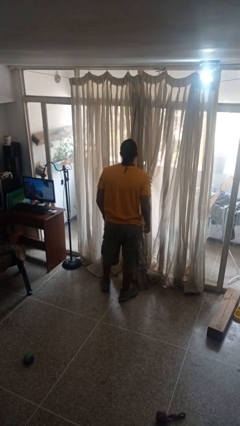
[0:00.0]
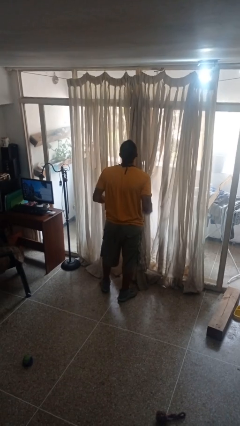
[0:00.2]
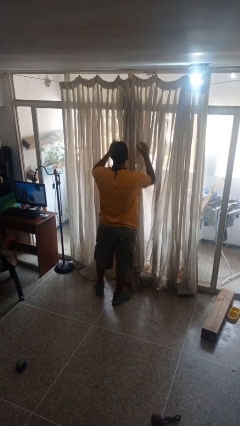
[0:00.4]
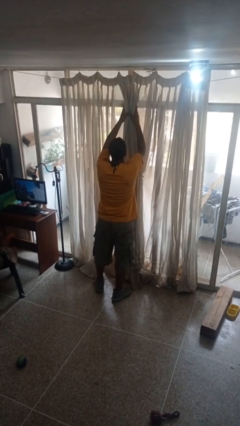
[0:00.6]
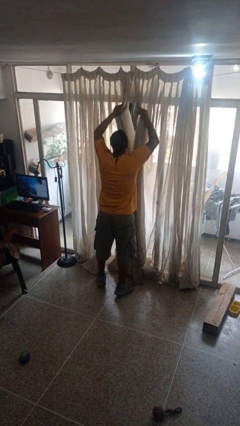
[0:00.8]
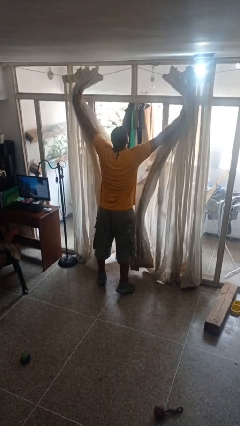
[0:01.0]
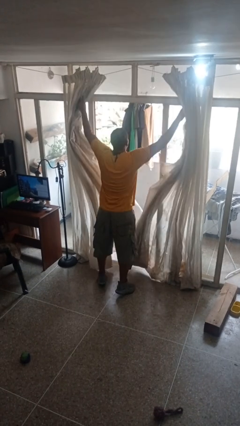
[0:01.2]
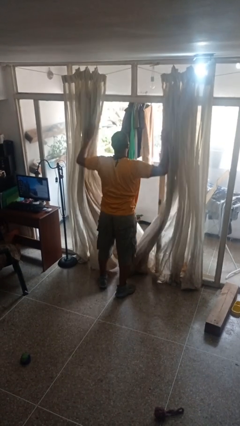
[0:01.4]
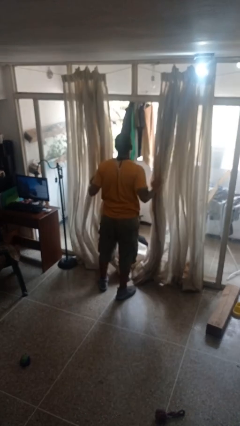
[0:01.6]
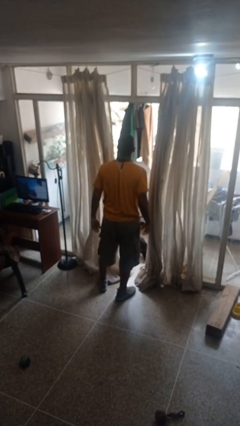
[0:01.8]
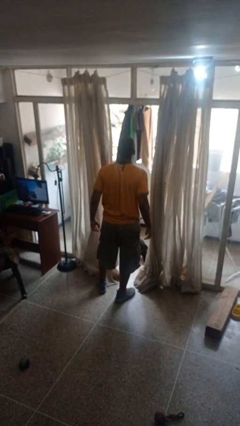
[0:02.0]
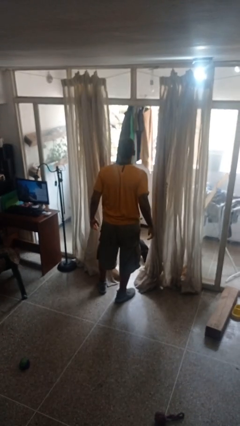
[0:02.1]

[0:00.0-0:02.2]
person opens curtains

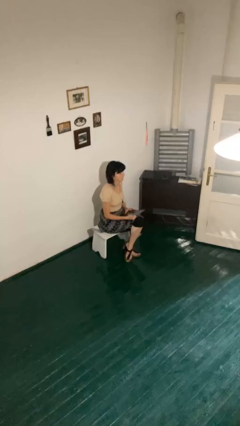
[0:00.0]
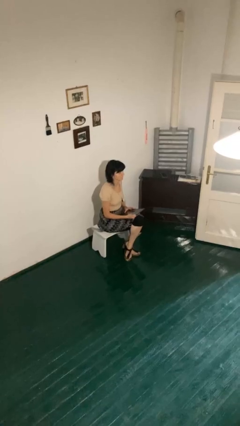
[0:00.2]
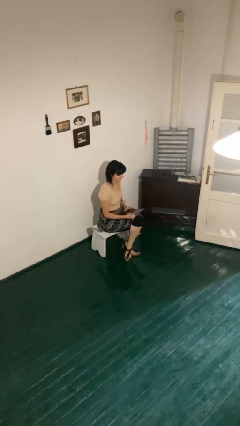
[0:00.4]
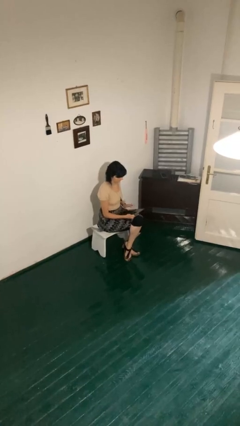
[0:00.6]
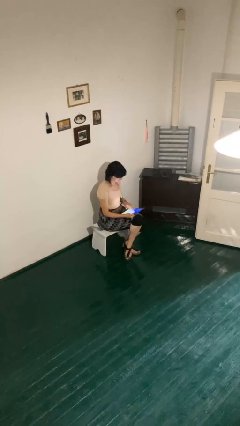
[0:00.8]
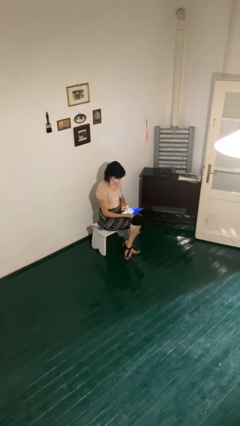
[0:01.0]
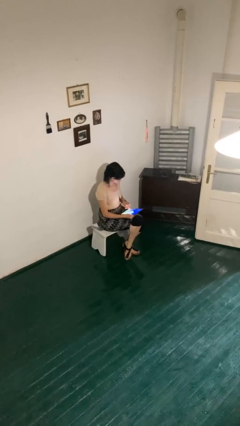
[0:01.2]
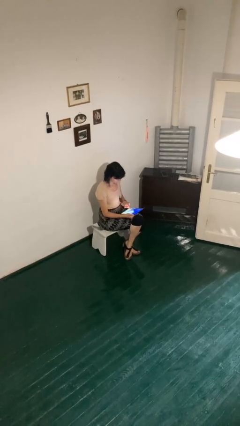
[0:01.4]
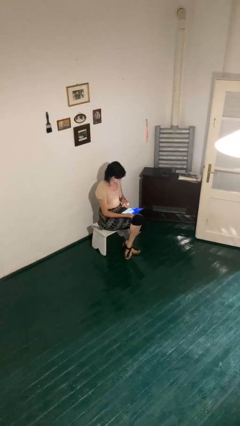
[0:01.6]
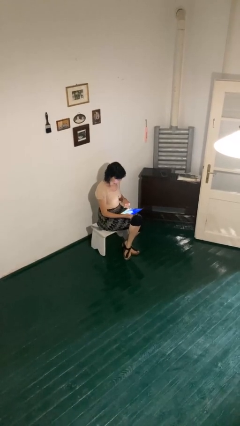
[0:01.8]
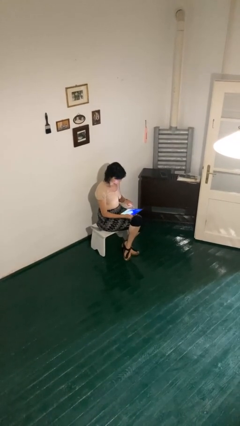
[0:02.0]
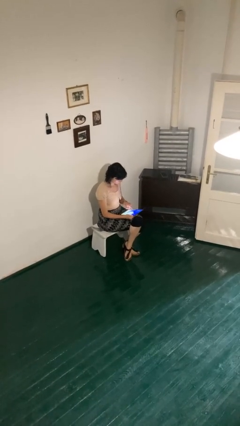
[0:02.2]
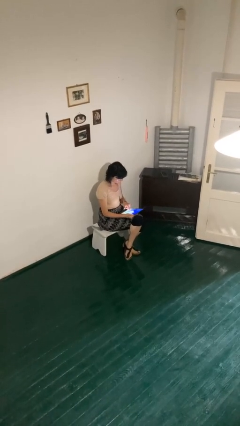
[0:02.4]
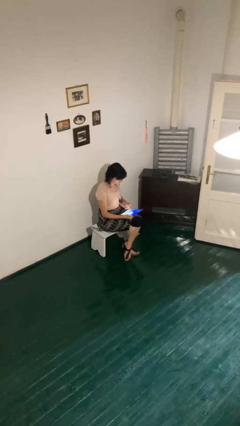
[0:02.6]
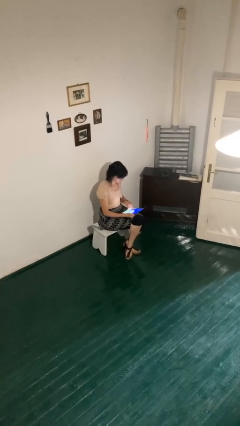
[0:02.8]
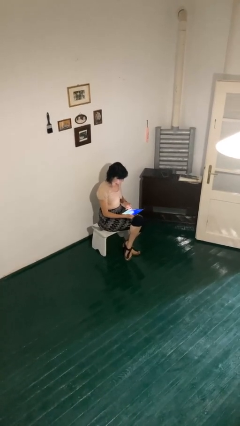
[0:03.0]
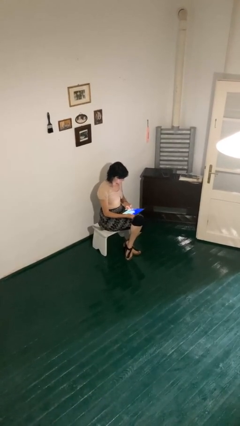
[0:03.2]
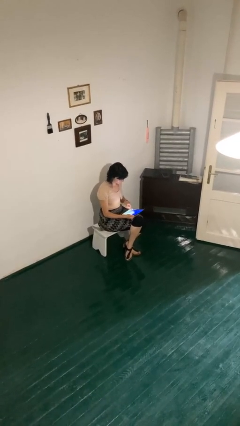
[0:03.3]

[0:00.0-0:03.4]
person interacts with tablet

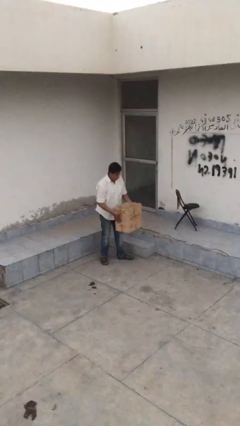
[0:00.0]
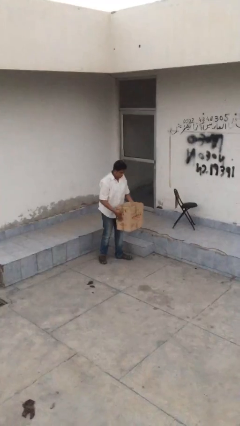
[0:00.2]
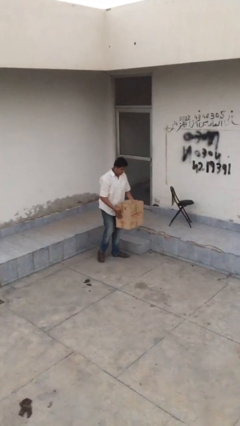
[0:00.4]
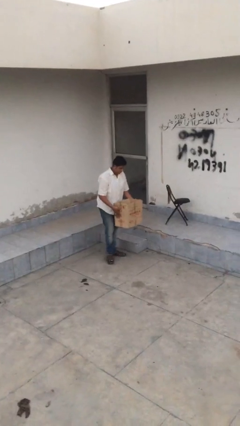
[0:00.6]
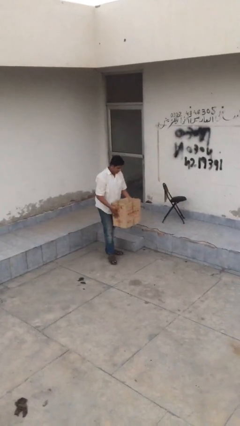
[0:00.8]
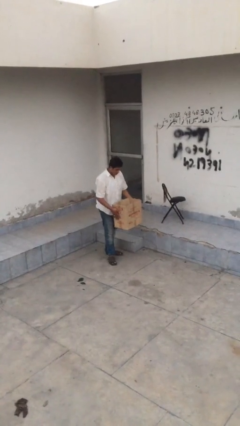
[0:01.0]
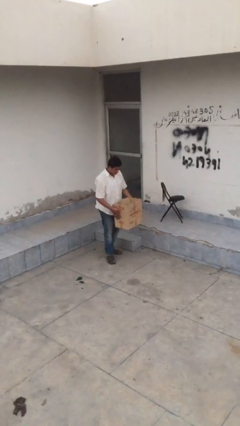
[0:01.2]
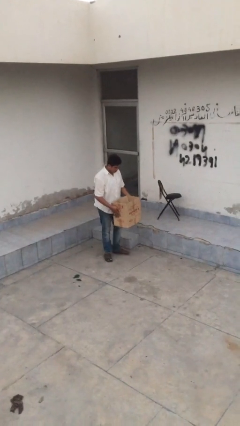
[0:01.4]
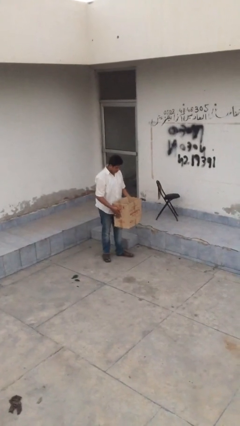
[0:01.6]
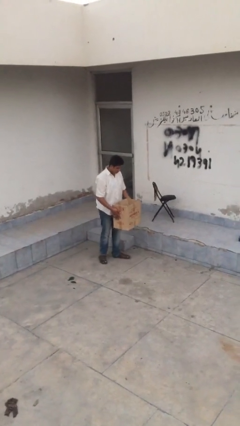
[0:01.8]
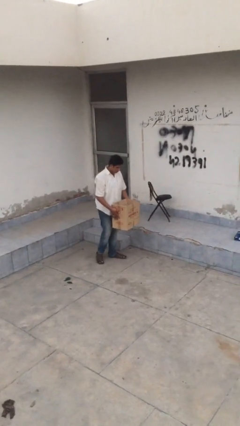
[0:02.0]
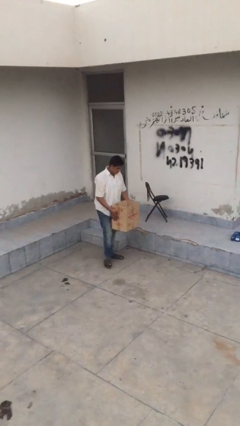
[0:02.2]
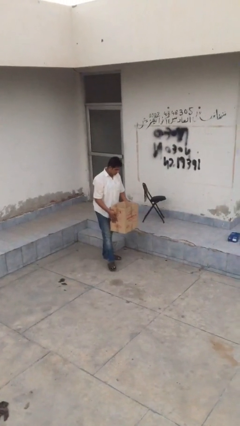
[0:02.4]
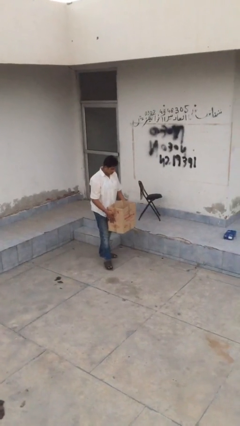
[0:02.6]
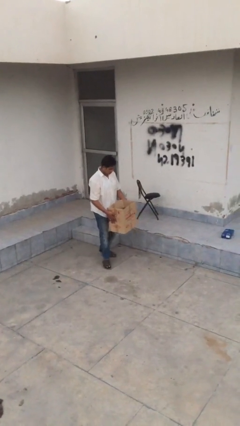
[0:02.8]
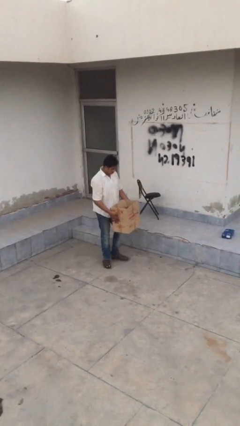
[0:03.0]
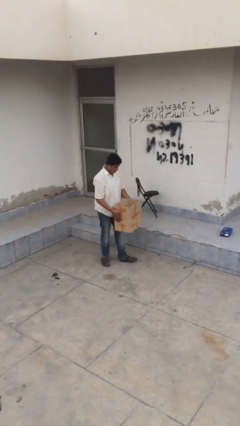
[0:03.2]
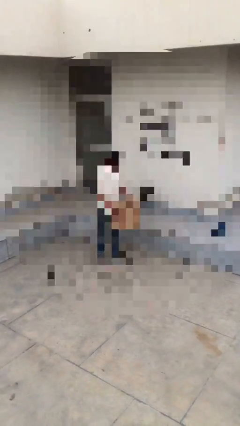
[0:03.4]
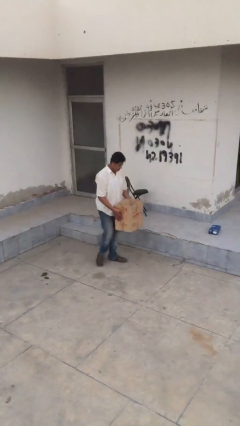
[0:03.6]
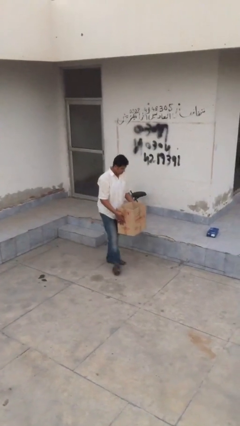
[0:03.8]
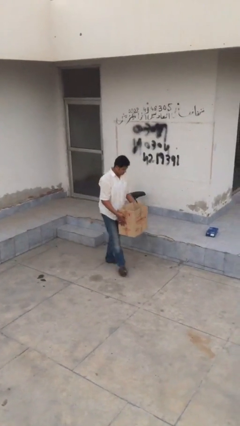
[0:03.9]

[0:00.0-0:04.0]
person carries heavy object

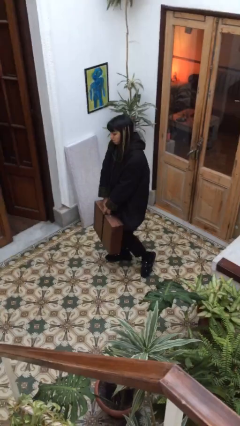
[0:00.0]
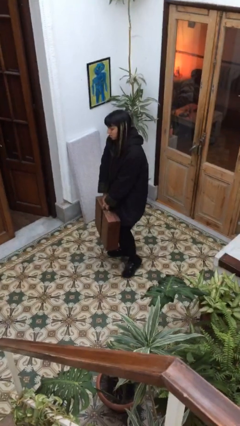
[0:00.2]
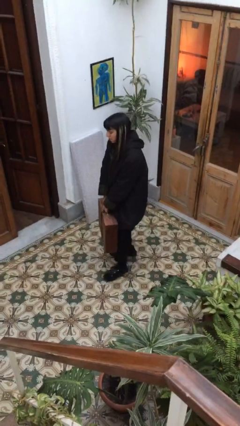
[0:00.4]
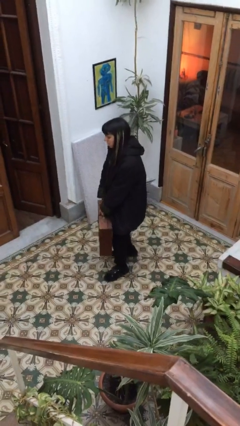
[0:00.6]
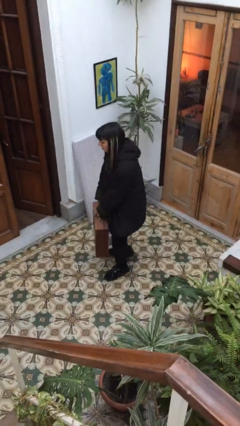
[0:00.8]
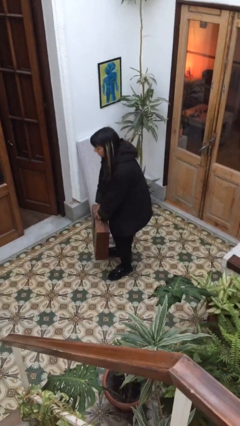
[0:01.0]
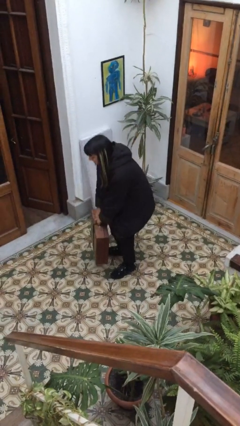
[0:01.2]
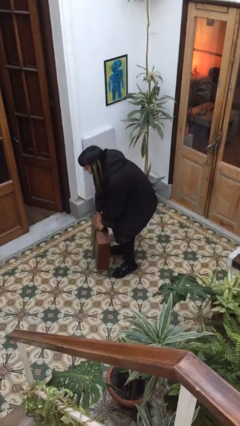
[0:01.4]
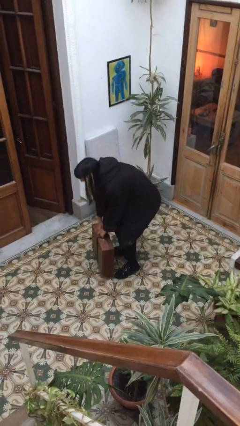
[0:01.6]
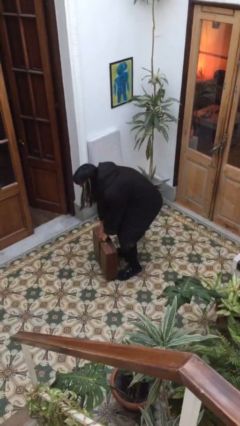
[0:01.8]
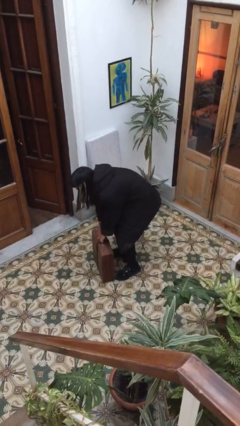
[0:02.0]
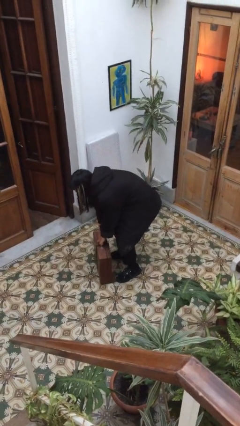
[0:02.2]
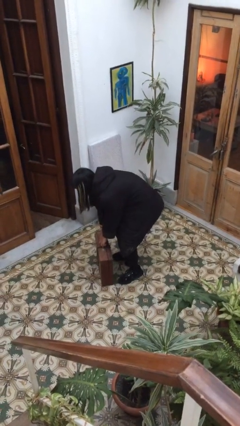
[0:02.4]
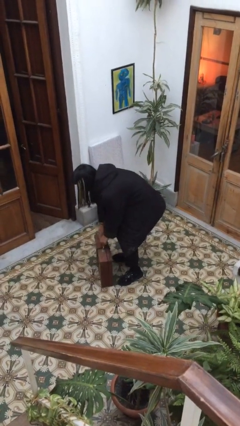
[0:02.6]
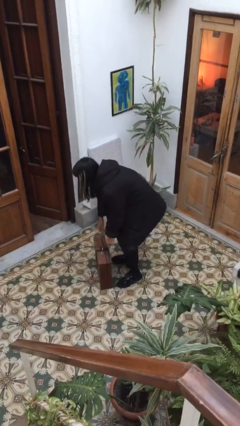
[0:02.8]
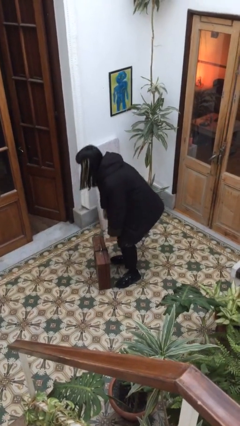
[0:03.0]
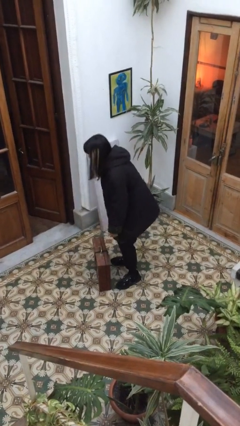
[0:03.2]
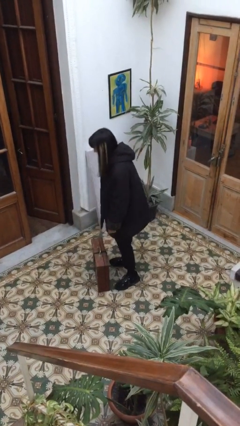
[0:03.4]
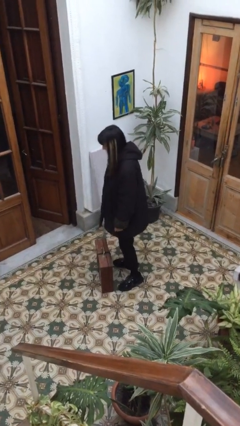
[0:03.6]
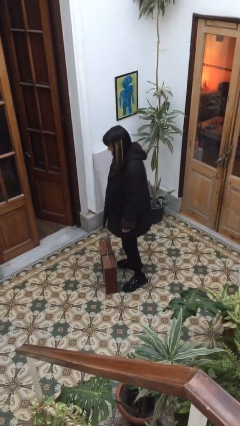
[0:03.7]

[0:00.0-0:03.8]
person puts down object on floor

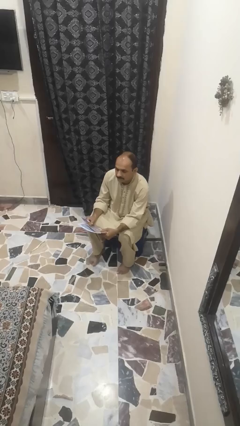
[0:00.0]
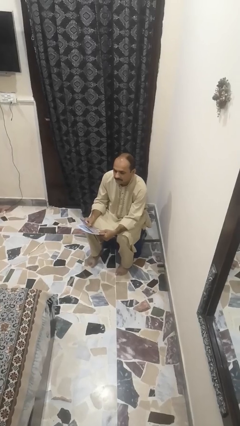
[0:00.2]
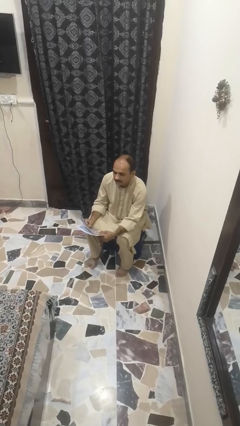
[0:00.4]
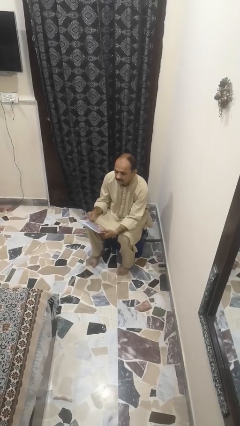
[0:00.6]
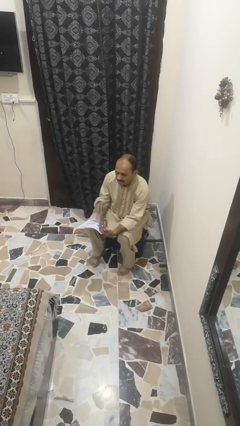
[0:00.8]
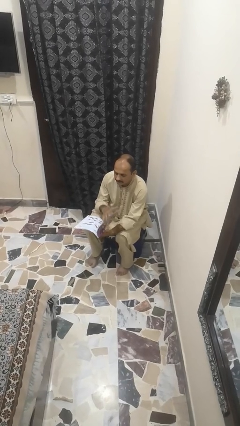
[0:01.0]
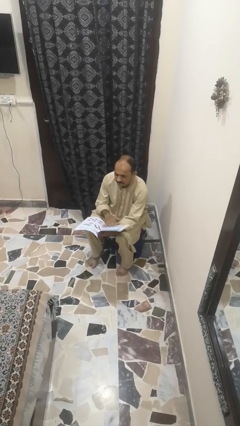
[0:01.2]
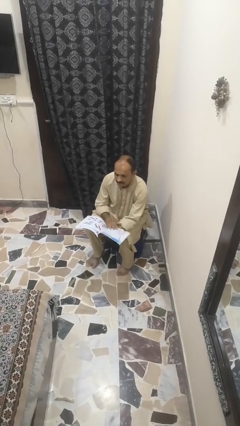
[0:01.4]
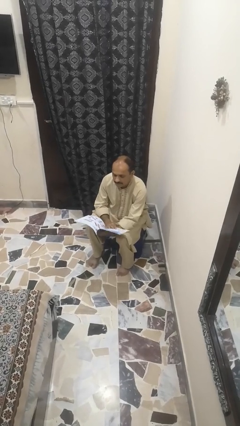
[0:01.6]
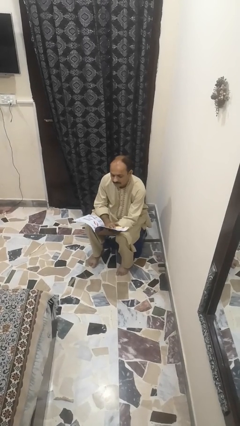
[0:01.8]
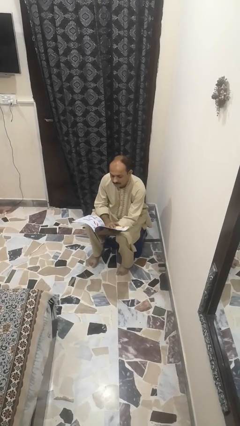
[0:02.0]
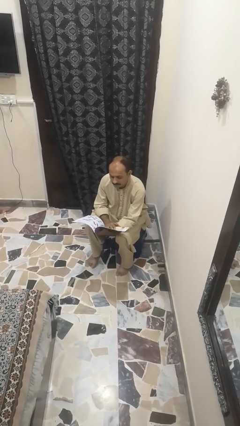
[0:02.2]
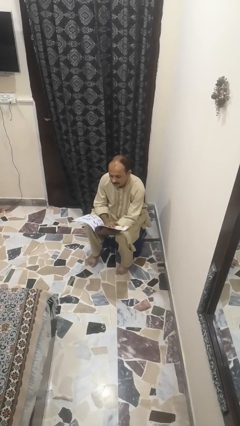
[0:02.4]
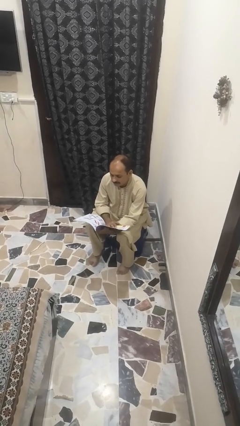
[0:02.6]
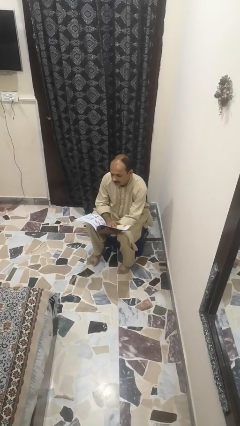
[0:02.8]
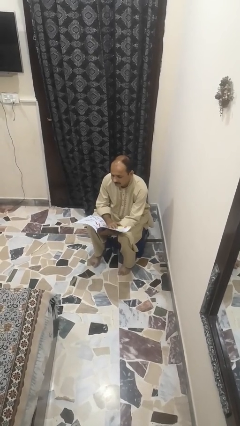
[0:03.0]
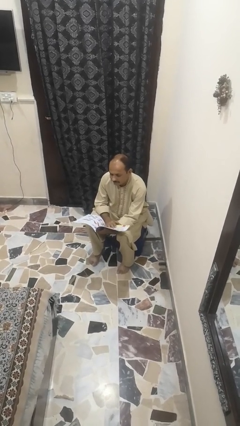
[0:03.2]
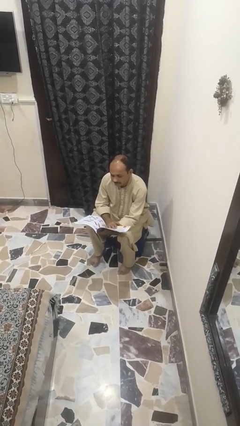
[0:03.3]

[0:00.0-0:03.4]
person reads magazine

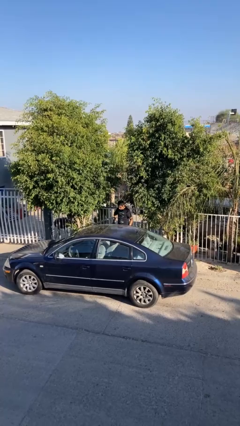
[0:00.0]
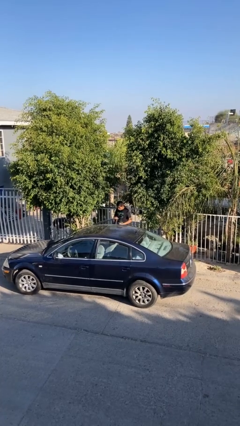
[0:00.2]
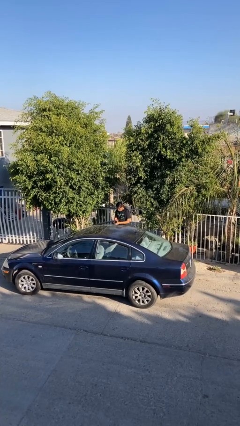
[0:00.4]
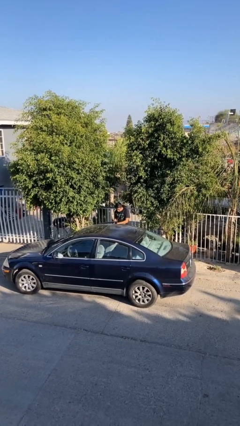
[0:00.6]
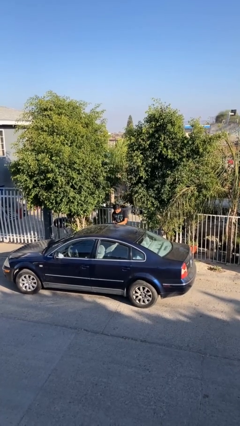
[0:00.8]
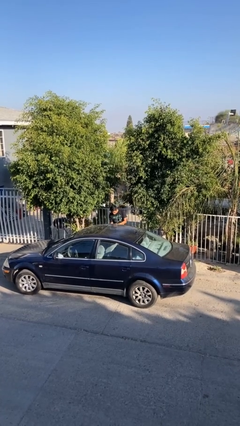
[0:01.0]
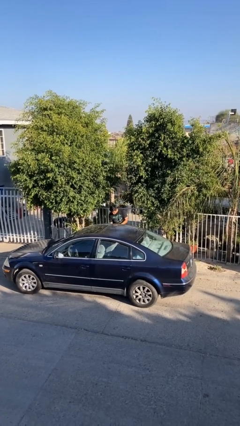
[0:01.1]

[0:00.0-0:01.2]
person closes car door
